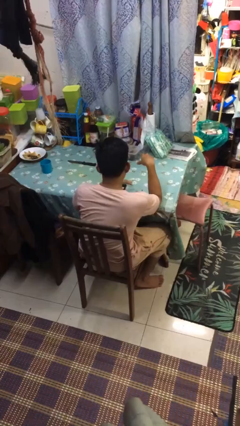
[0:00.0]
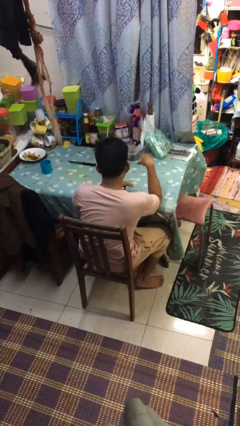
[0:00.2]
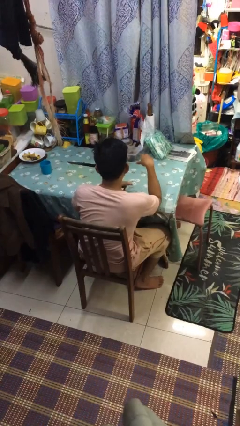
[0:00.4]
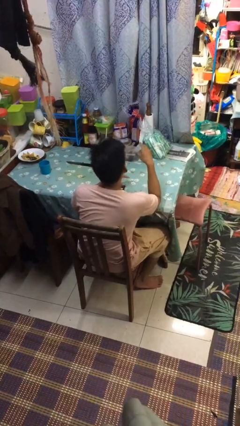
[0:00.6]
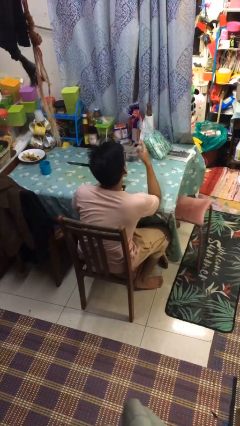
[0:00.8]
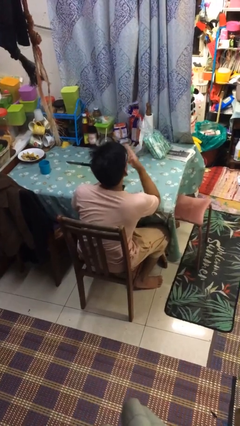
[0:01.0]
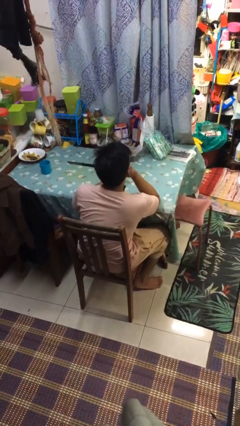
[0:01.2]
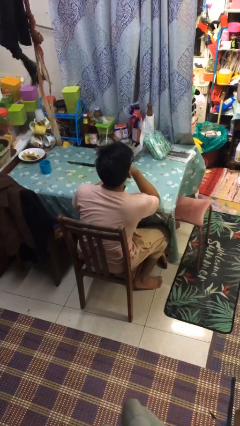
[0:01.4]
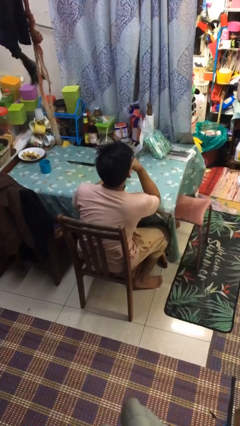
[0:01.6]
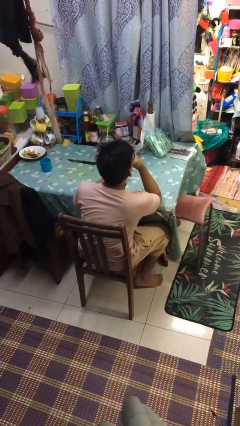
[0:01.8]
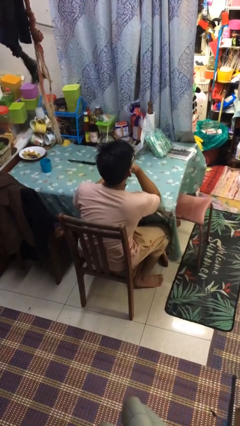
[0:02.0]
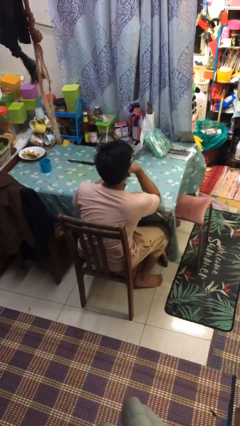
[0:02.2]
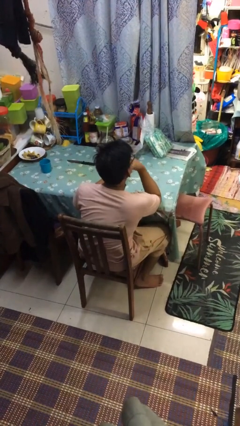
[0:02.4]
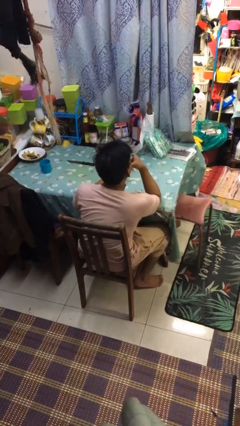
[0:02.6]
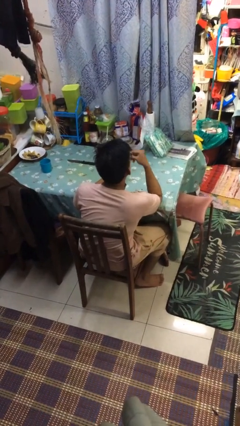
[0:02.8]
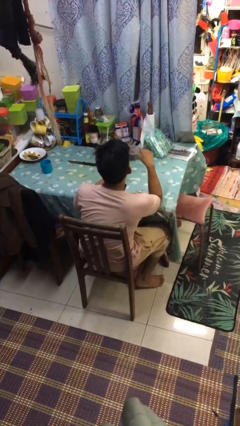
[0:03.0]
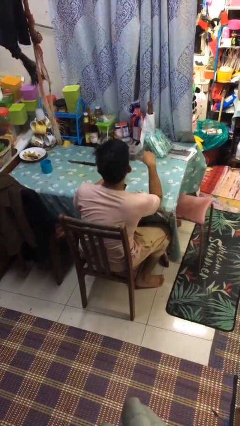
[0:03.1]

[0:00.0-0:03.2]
person strokes chin

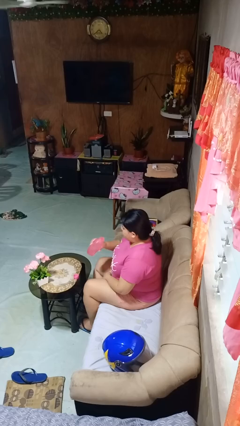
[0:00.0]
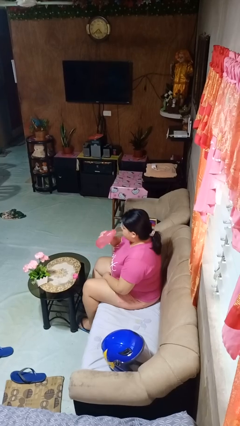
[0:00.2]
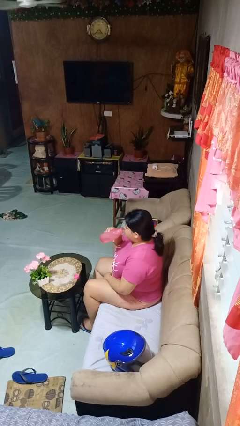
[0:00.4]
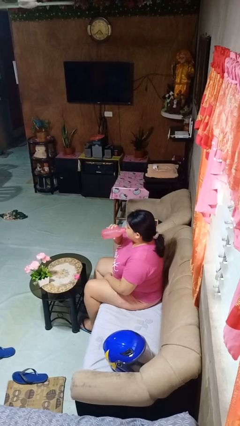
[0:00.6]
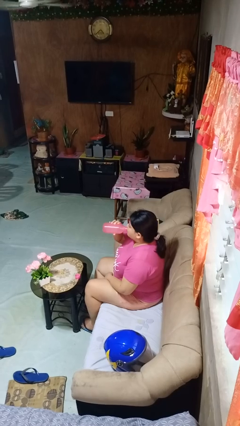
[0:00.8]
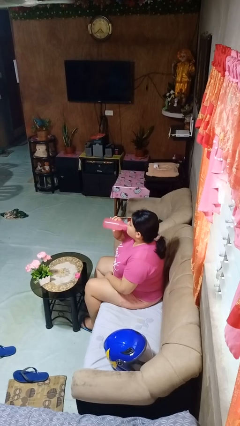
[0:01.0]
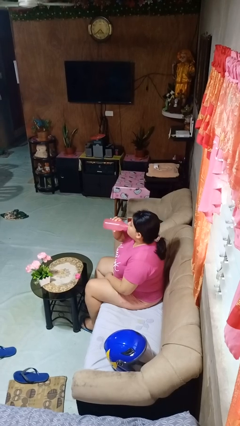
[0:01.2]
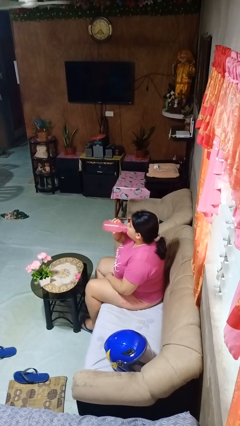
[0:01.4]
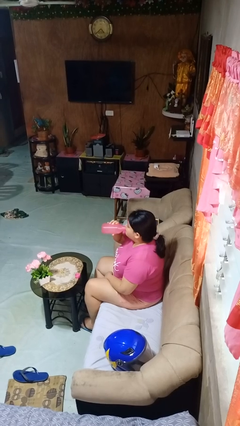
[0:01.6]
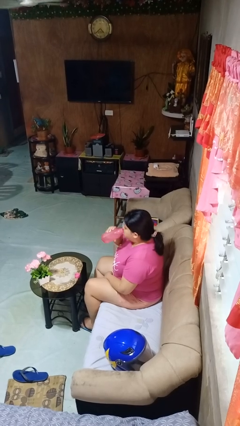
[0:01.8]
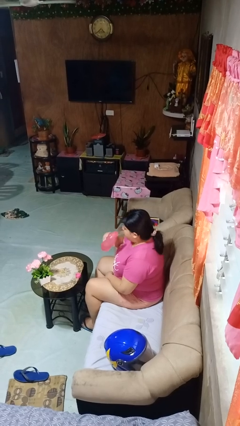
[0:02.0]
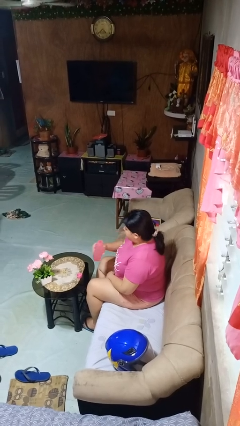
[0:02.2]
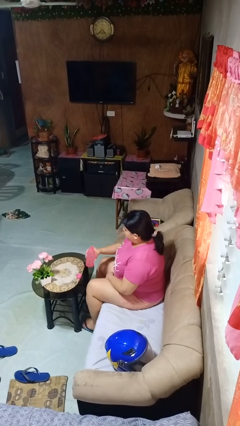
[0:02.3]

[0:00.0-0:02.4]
person drinks from bottle

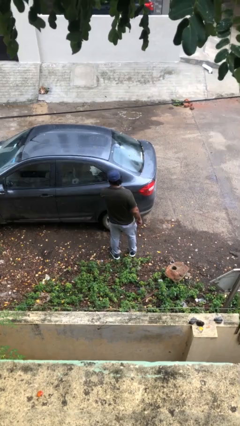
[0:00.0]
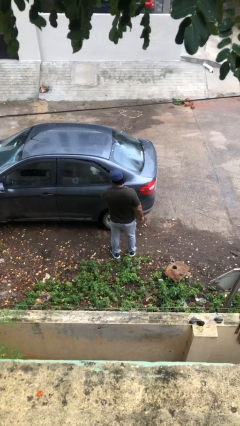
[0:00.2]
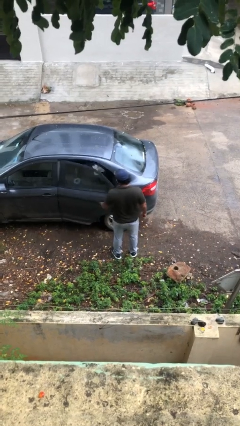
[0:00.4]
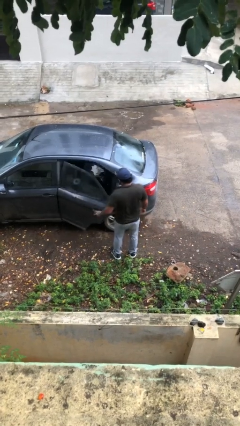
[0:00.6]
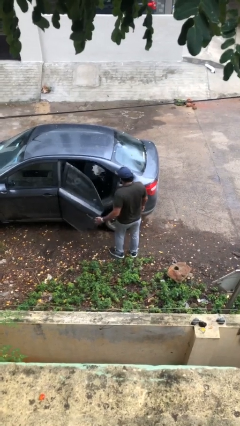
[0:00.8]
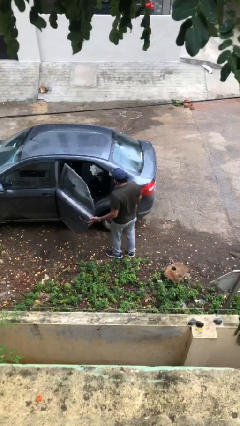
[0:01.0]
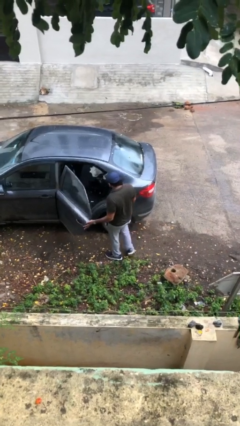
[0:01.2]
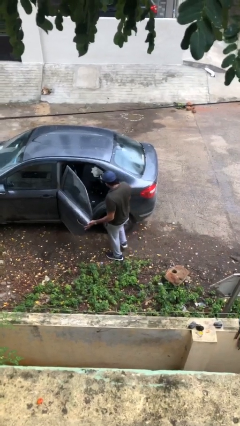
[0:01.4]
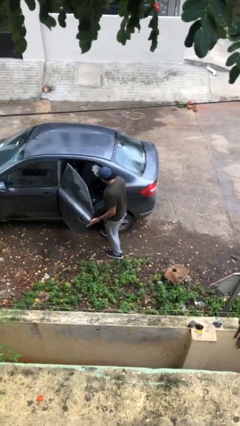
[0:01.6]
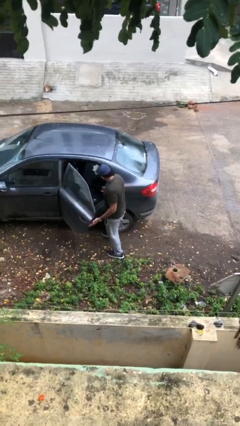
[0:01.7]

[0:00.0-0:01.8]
person opens car door

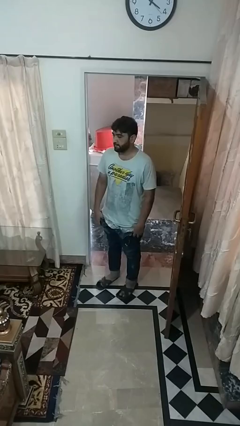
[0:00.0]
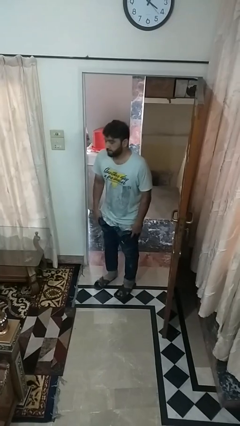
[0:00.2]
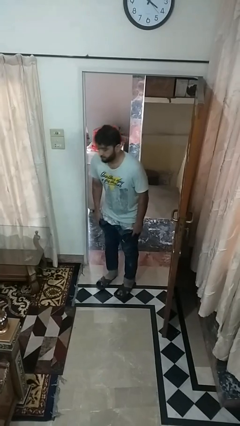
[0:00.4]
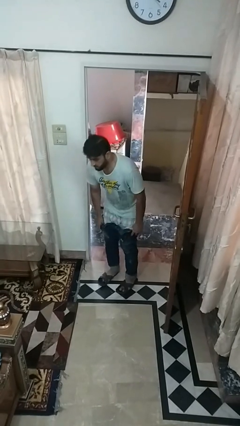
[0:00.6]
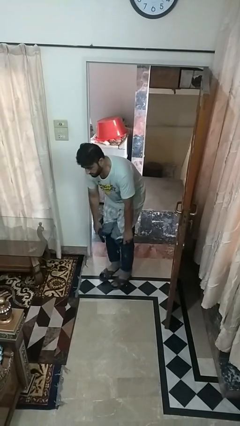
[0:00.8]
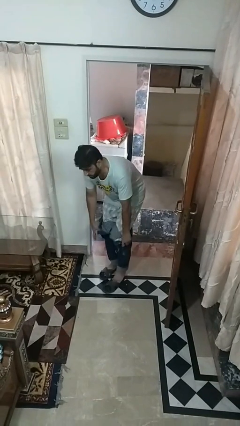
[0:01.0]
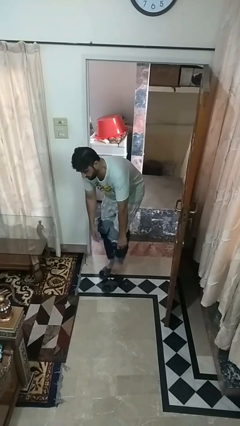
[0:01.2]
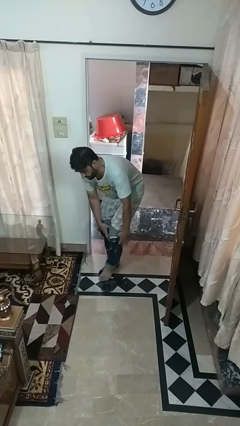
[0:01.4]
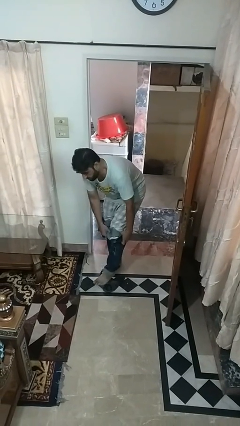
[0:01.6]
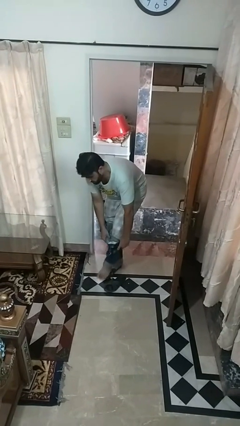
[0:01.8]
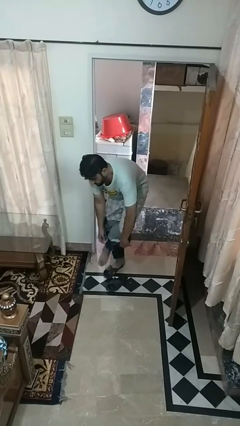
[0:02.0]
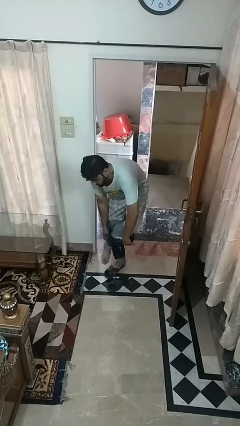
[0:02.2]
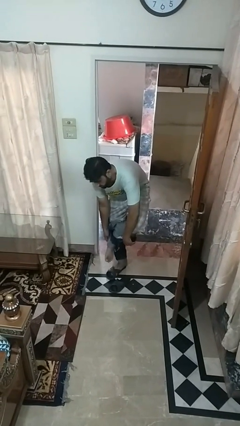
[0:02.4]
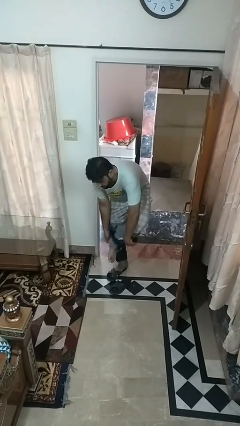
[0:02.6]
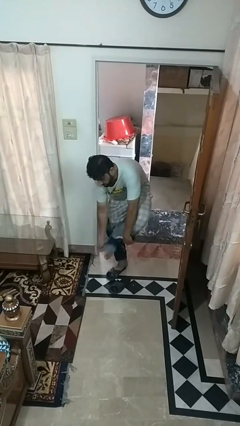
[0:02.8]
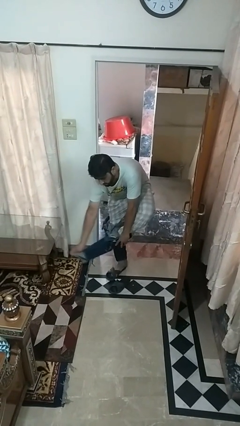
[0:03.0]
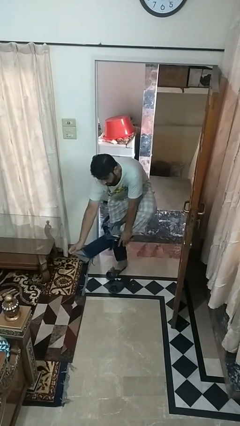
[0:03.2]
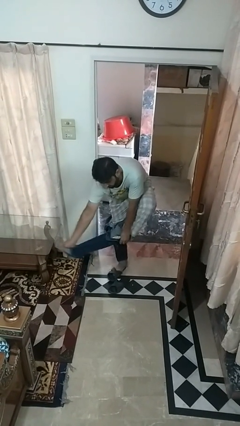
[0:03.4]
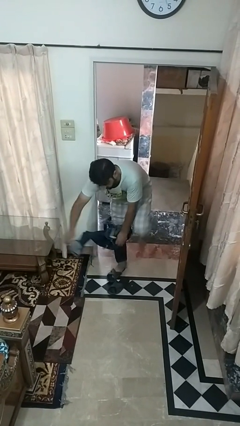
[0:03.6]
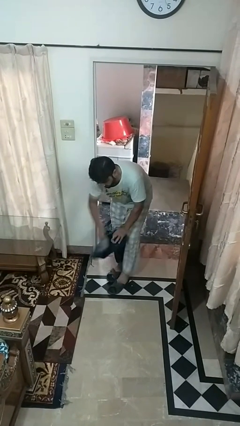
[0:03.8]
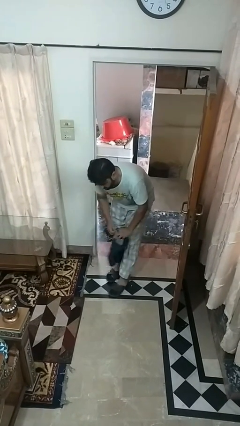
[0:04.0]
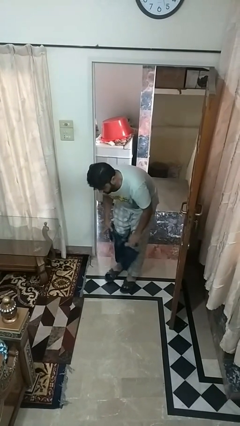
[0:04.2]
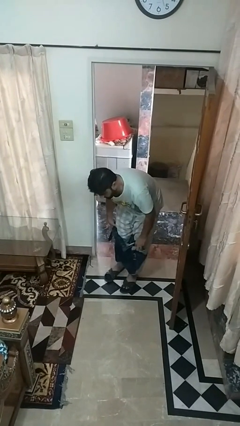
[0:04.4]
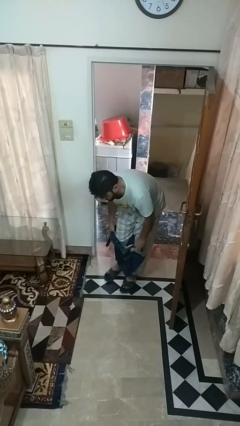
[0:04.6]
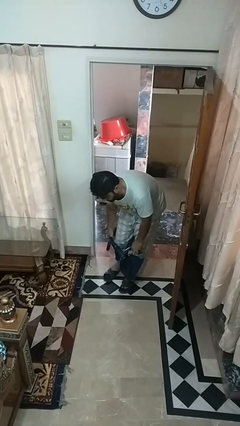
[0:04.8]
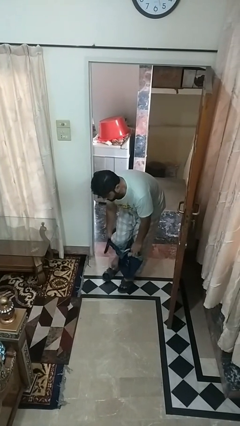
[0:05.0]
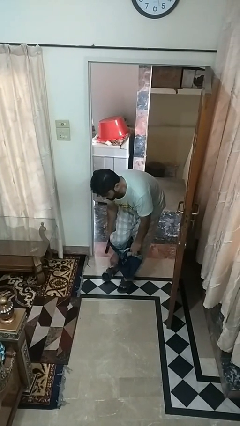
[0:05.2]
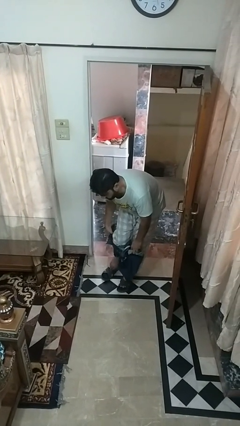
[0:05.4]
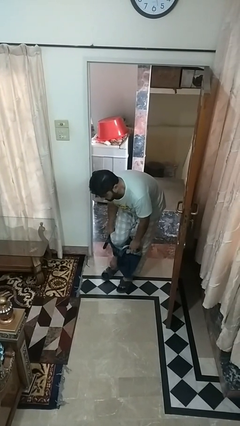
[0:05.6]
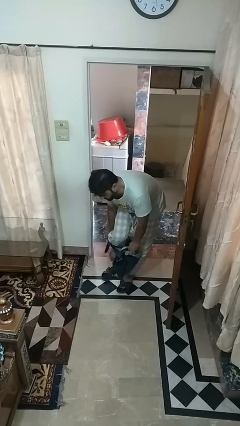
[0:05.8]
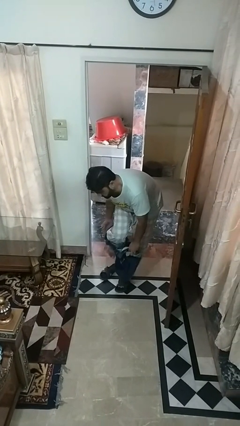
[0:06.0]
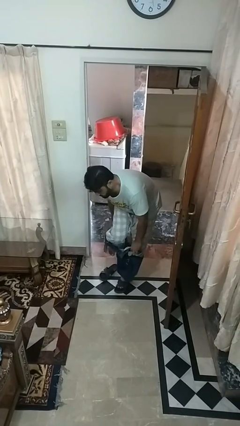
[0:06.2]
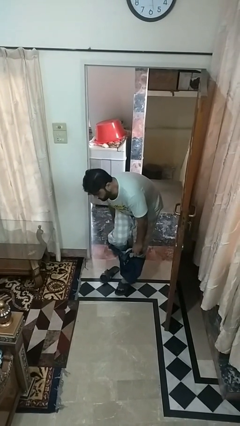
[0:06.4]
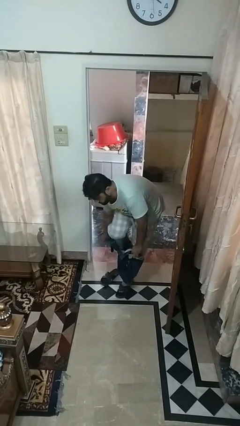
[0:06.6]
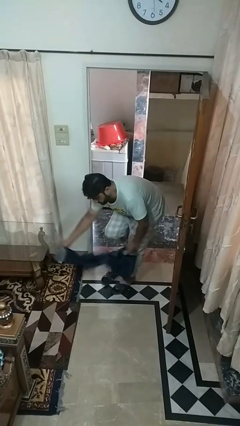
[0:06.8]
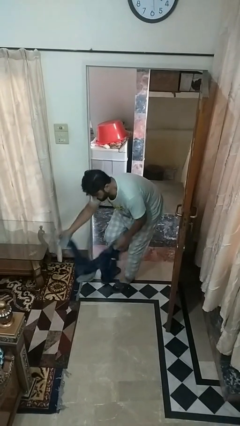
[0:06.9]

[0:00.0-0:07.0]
person takes off pants

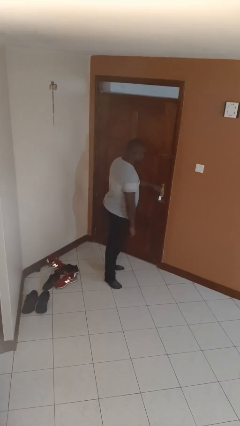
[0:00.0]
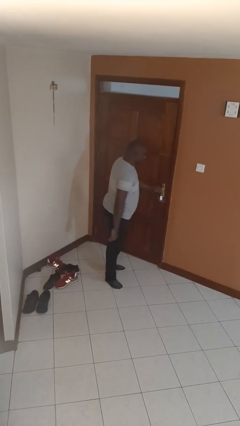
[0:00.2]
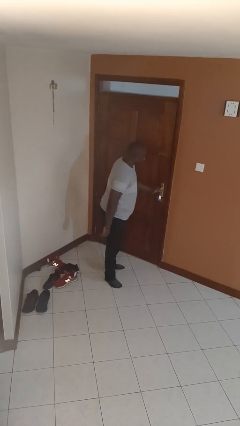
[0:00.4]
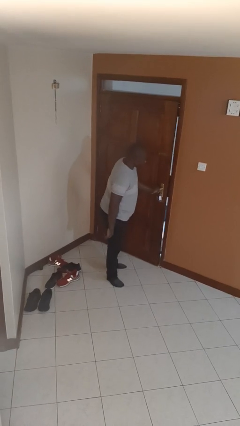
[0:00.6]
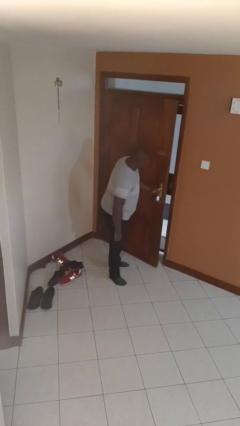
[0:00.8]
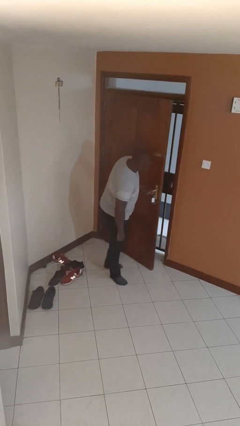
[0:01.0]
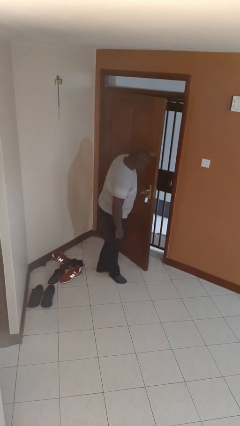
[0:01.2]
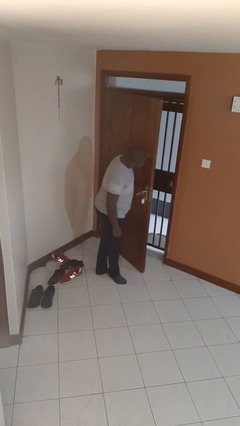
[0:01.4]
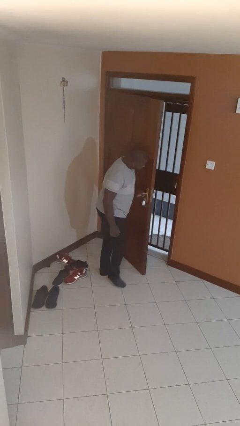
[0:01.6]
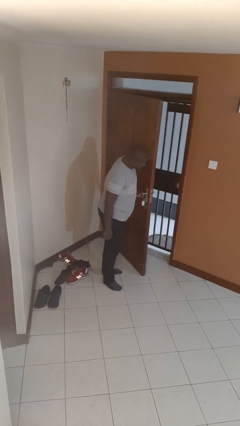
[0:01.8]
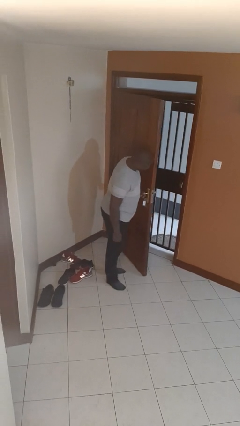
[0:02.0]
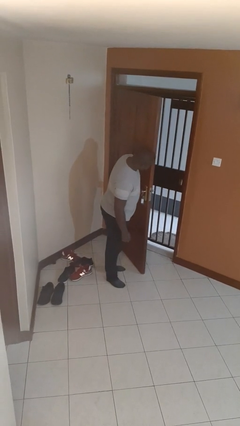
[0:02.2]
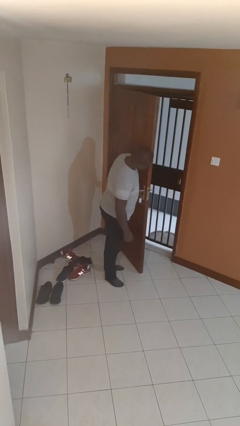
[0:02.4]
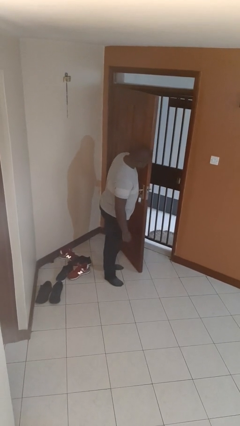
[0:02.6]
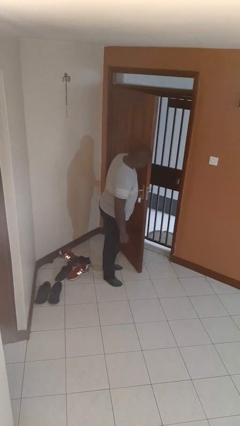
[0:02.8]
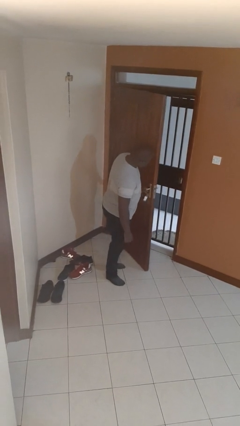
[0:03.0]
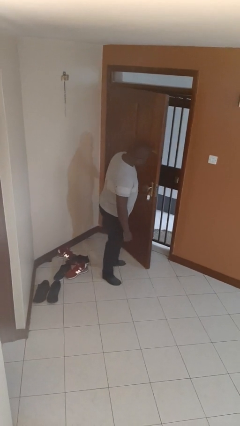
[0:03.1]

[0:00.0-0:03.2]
person opens facility door
